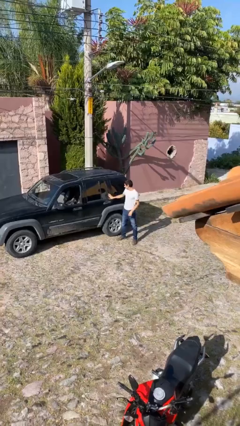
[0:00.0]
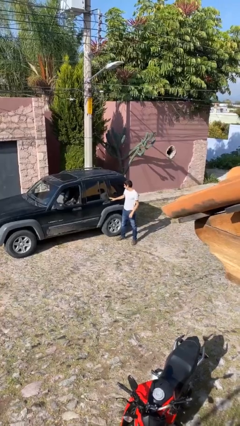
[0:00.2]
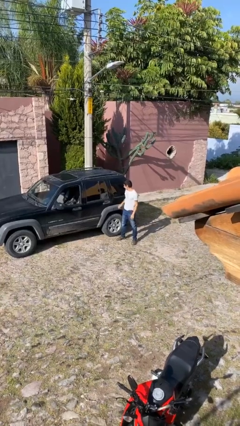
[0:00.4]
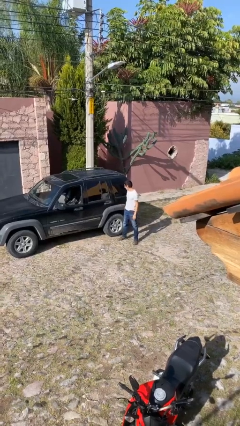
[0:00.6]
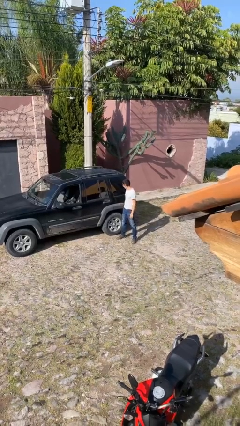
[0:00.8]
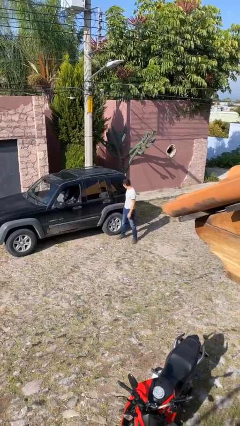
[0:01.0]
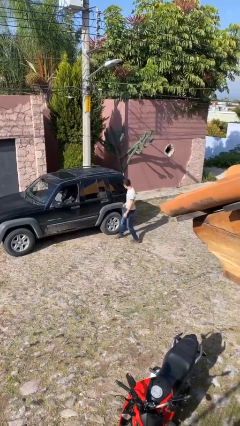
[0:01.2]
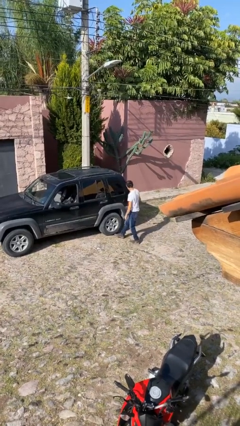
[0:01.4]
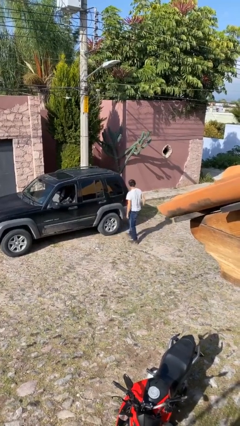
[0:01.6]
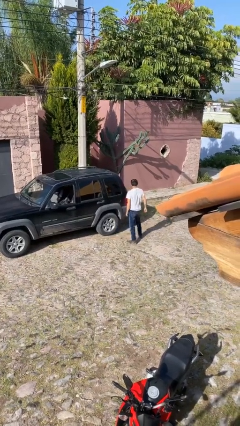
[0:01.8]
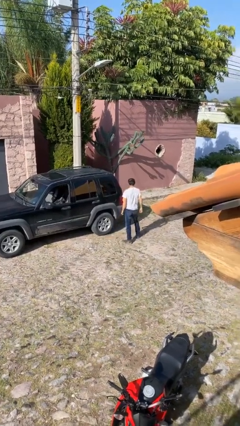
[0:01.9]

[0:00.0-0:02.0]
person closes car door

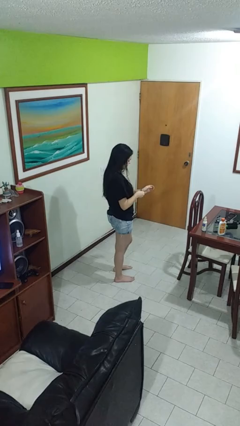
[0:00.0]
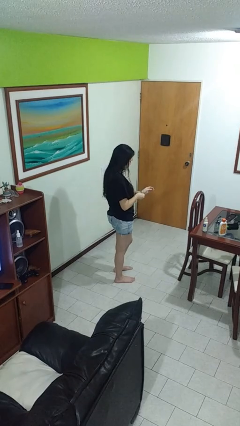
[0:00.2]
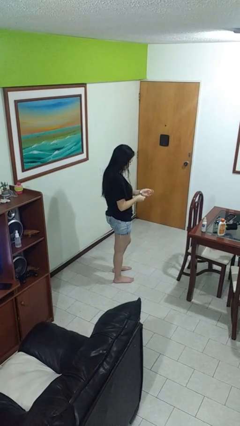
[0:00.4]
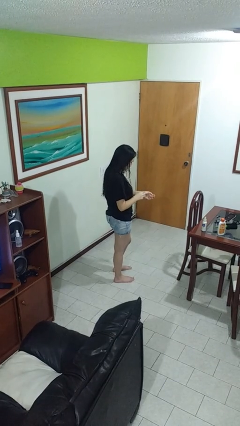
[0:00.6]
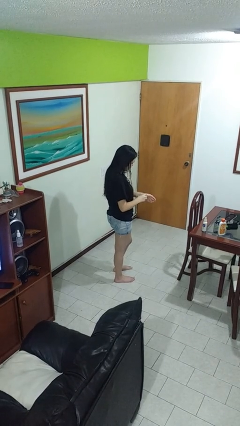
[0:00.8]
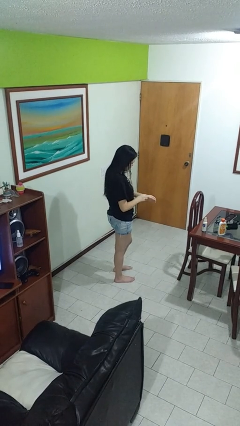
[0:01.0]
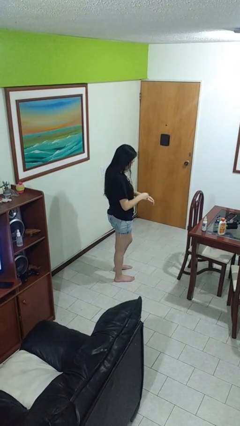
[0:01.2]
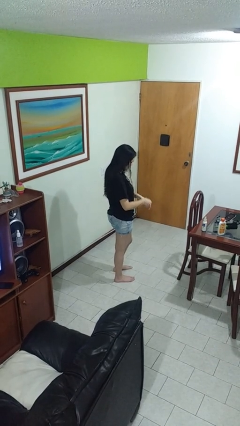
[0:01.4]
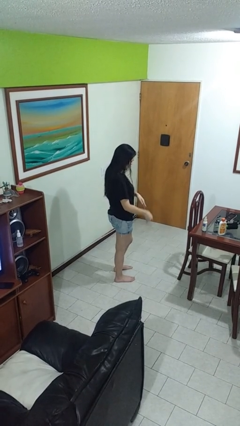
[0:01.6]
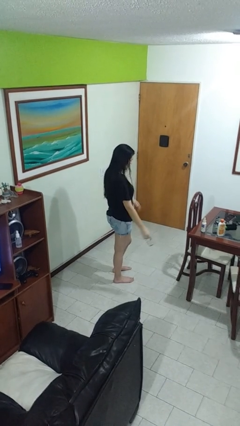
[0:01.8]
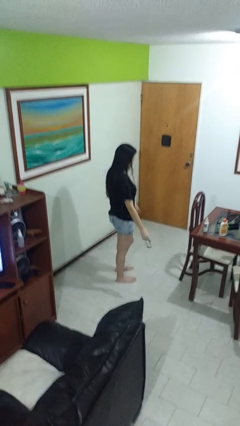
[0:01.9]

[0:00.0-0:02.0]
person takes off wristwatch

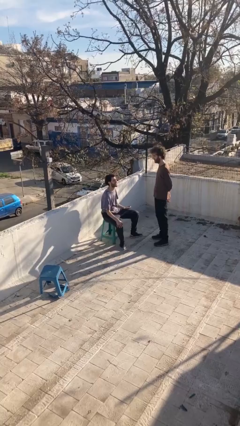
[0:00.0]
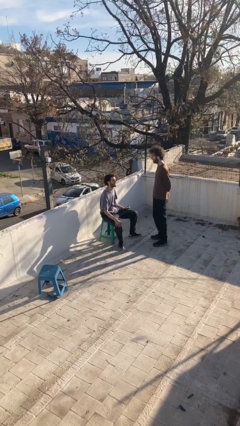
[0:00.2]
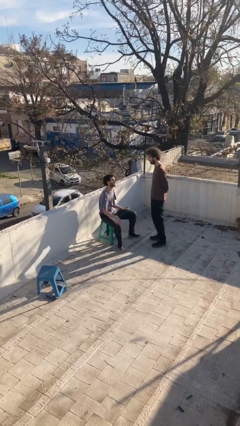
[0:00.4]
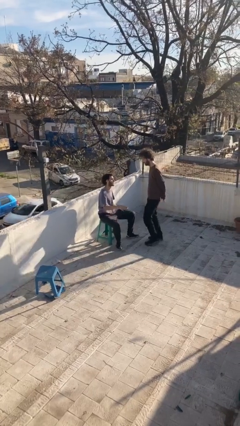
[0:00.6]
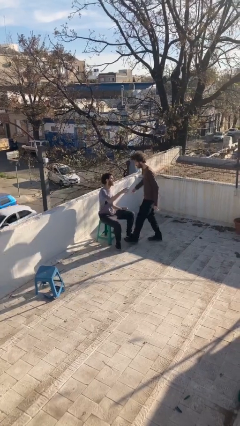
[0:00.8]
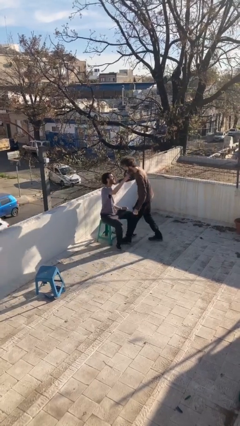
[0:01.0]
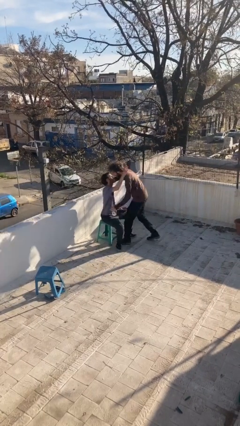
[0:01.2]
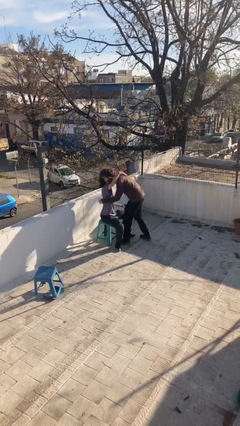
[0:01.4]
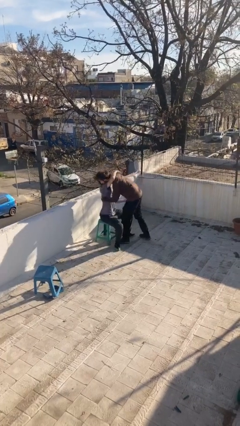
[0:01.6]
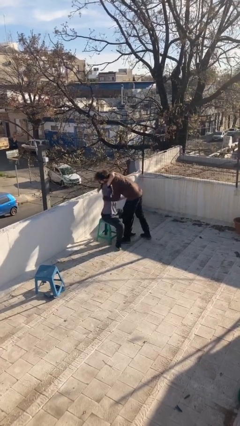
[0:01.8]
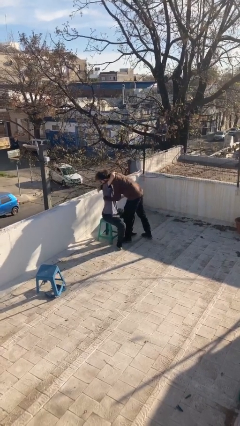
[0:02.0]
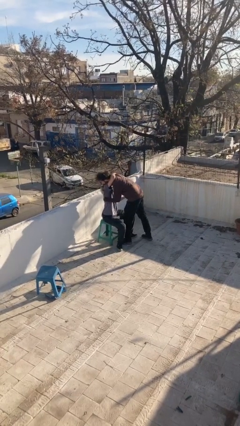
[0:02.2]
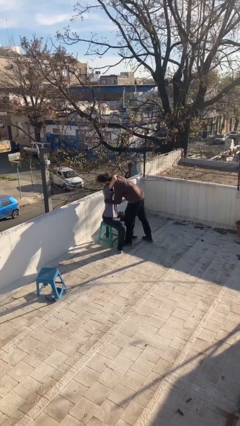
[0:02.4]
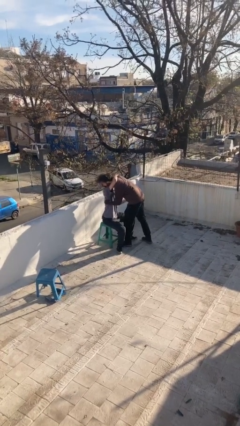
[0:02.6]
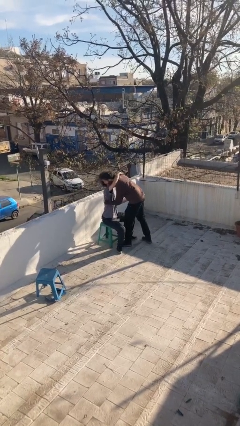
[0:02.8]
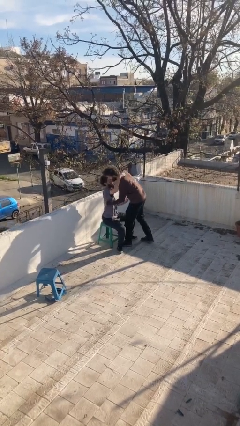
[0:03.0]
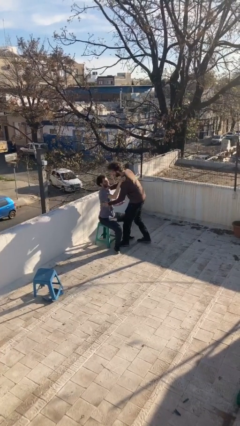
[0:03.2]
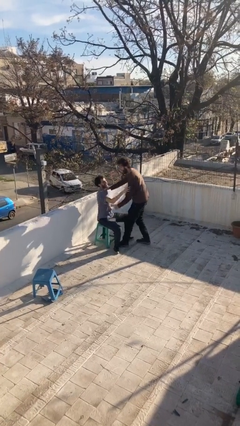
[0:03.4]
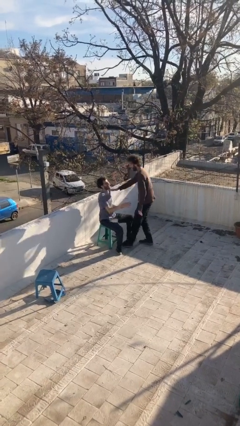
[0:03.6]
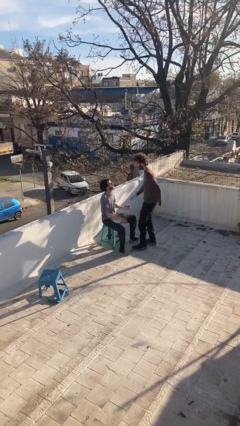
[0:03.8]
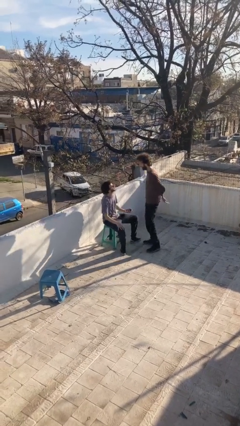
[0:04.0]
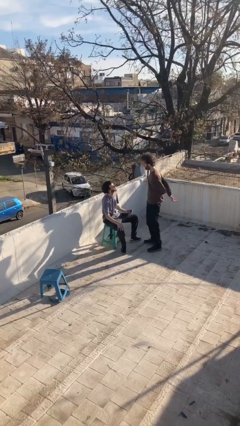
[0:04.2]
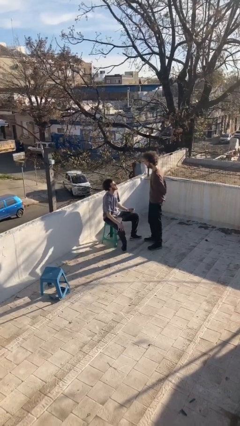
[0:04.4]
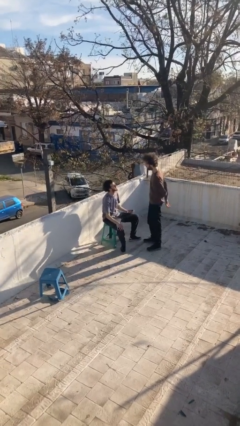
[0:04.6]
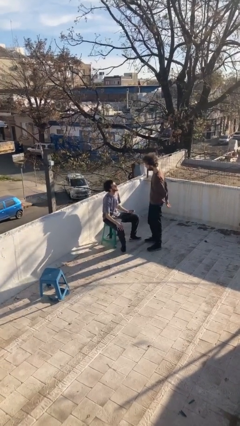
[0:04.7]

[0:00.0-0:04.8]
person embraces person

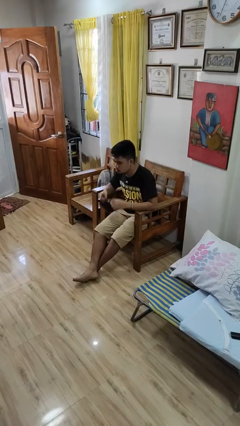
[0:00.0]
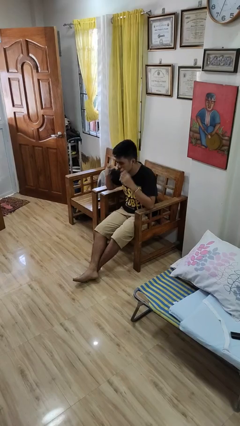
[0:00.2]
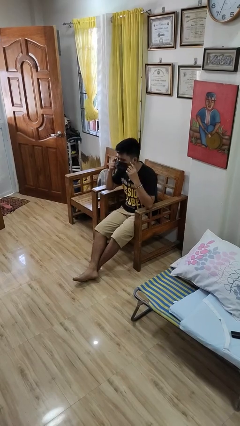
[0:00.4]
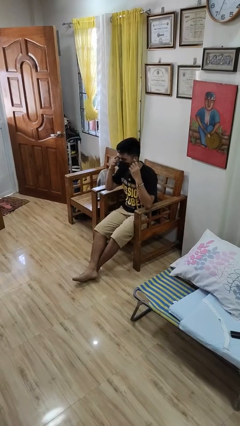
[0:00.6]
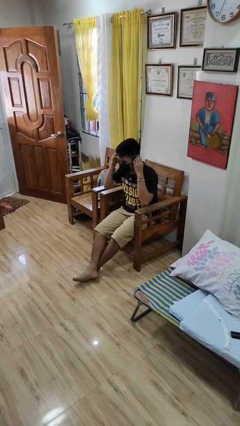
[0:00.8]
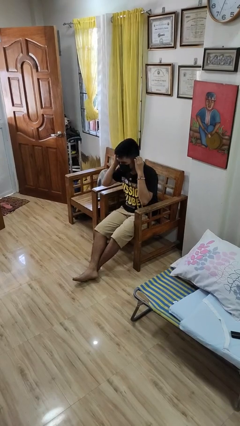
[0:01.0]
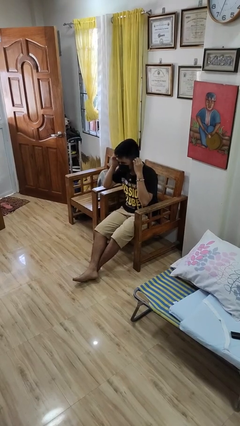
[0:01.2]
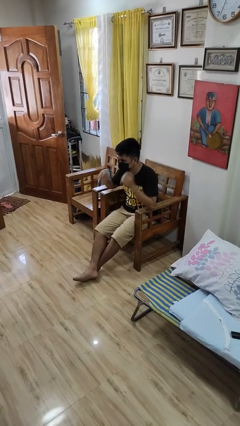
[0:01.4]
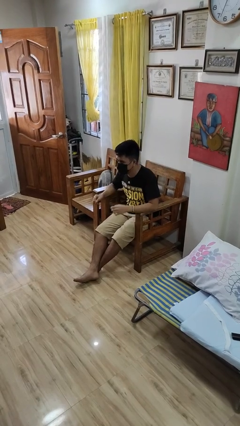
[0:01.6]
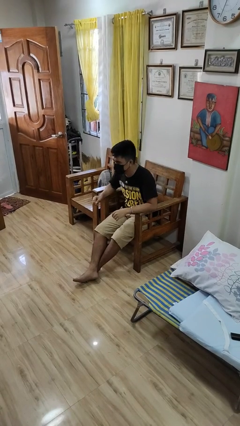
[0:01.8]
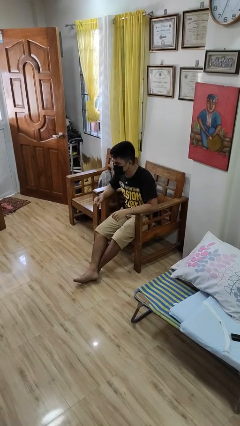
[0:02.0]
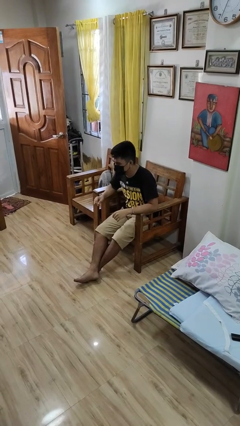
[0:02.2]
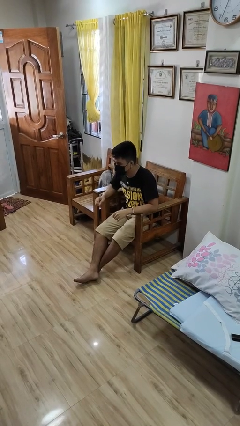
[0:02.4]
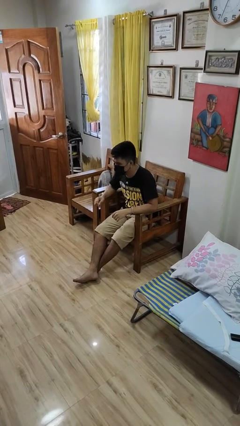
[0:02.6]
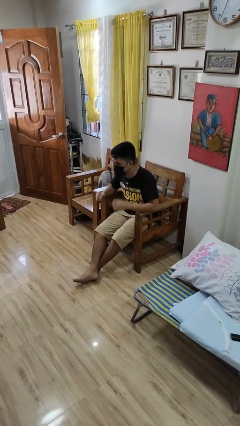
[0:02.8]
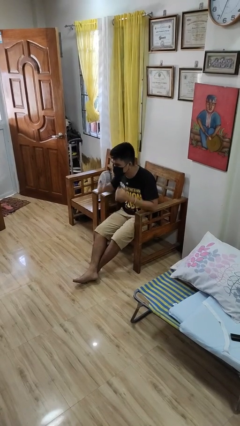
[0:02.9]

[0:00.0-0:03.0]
person puts on facemask

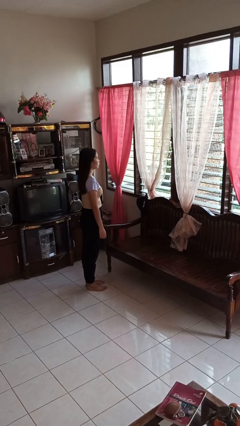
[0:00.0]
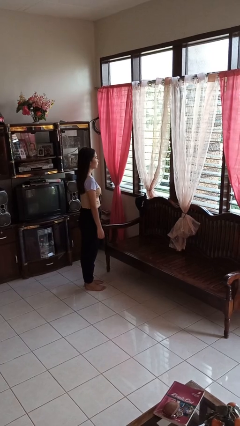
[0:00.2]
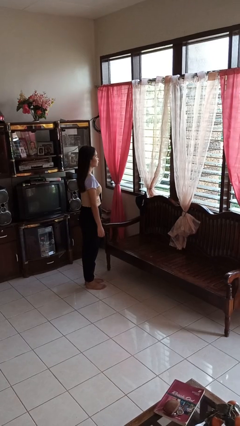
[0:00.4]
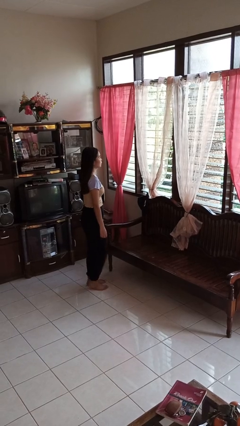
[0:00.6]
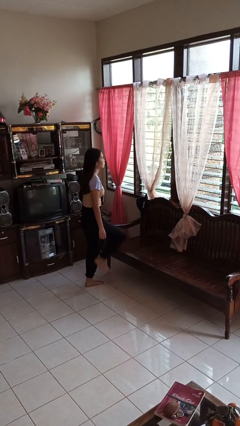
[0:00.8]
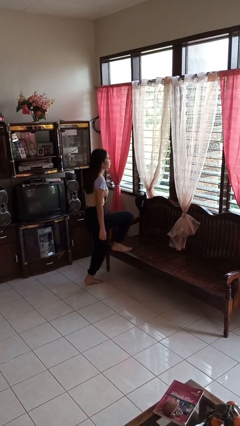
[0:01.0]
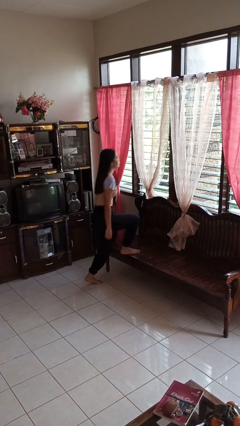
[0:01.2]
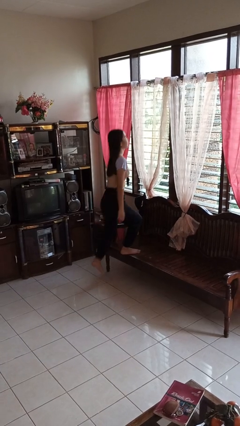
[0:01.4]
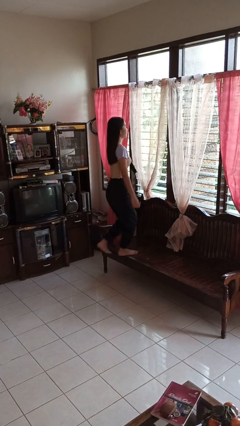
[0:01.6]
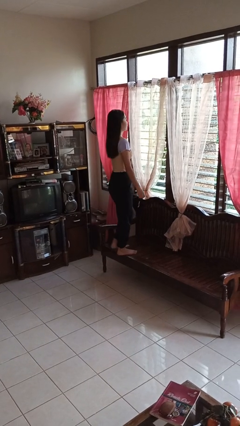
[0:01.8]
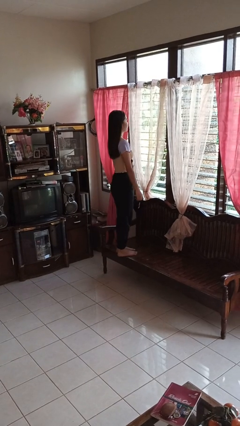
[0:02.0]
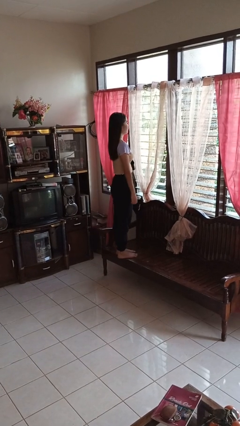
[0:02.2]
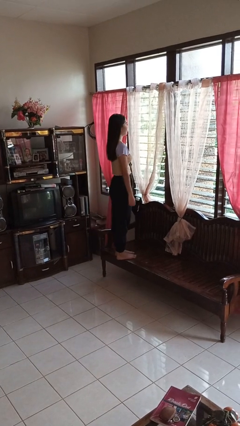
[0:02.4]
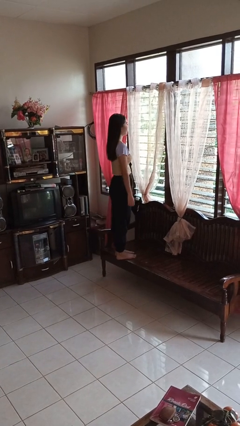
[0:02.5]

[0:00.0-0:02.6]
person climbs on couch

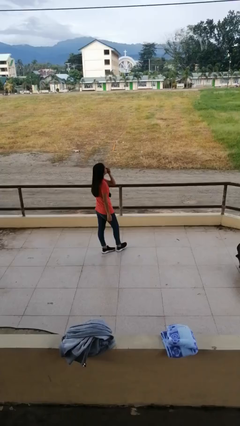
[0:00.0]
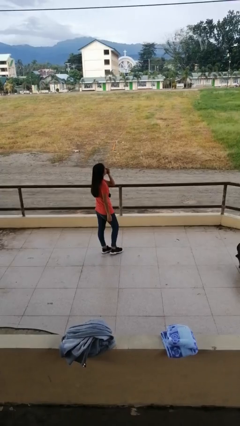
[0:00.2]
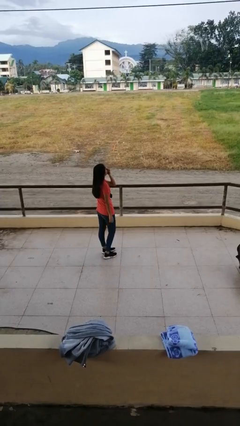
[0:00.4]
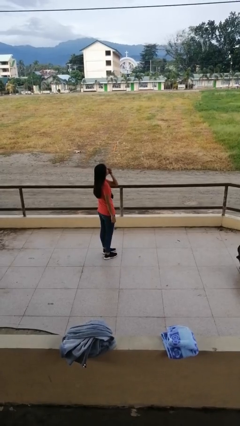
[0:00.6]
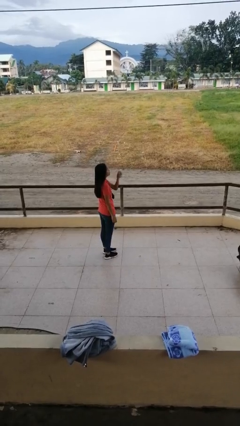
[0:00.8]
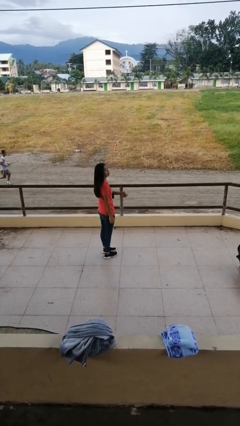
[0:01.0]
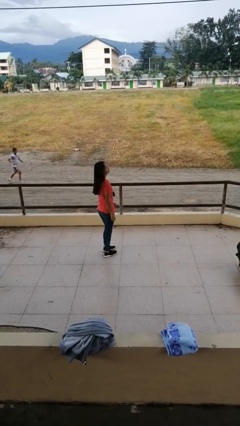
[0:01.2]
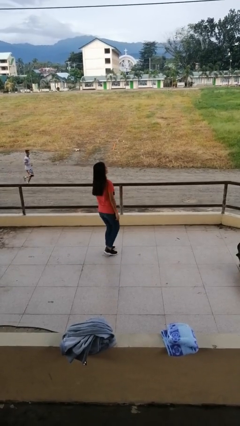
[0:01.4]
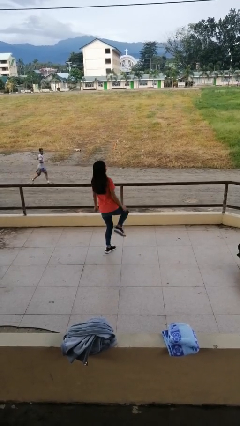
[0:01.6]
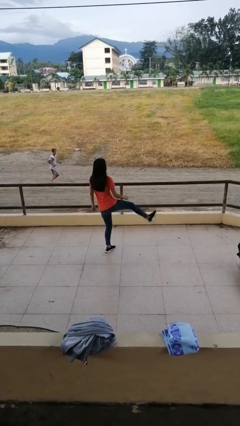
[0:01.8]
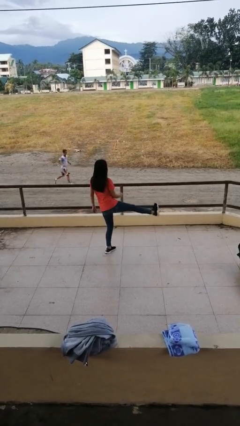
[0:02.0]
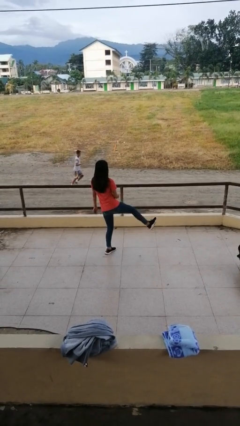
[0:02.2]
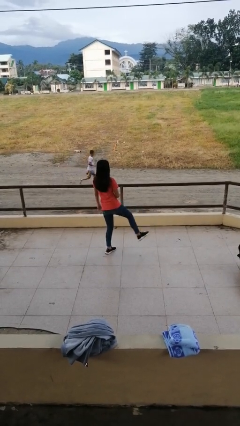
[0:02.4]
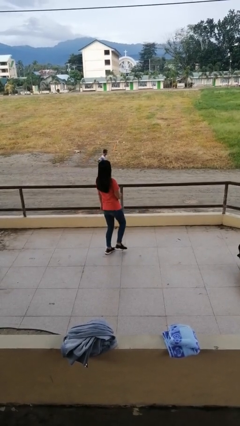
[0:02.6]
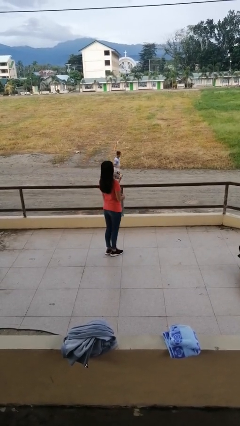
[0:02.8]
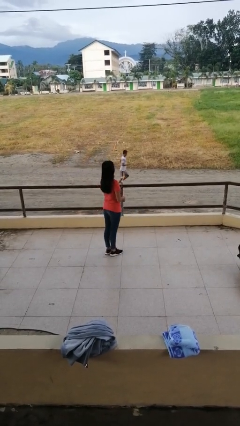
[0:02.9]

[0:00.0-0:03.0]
person karate kicks
